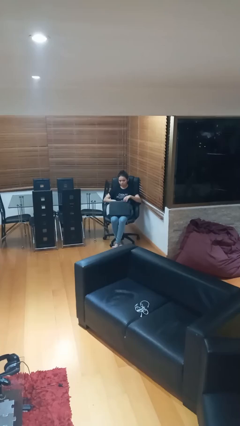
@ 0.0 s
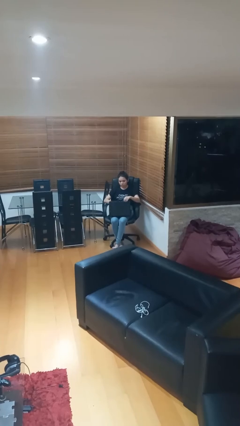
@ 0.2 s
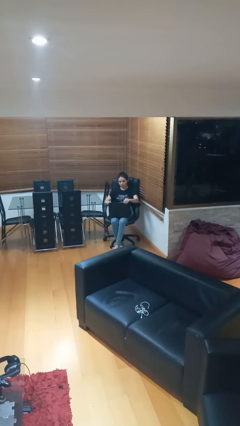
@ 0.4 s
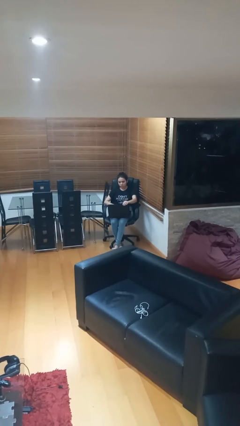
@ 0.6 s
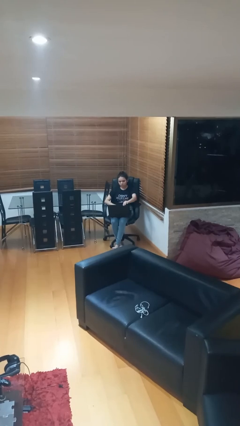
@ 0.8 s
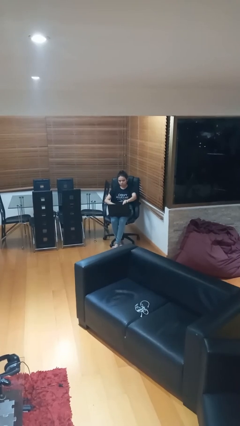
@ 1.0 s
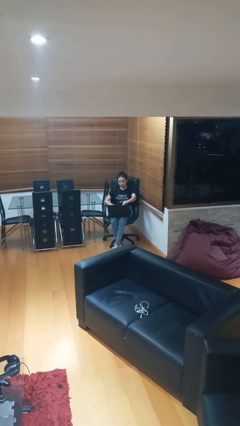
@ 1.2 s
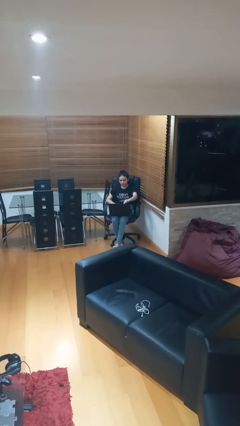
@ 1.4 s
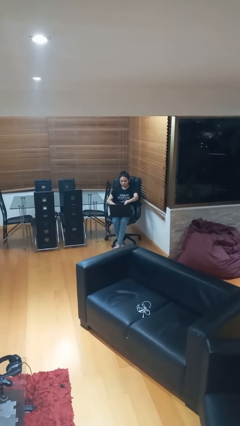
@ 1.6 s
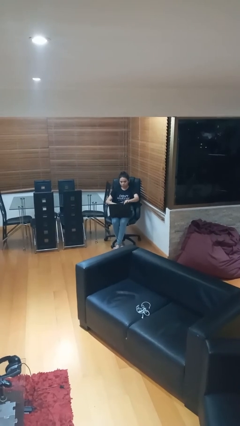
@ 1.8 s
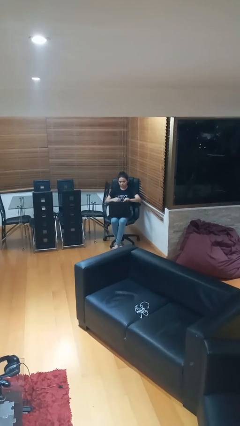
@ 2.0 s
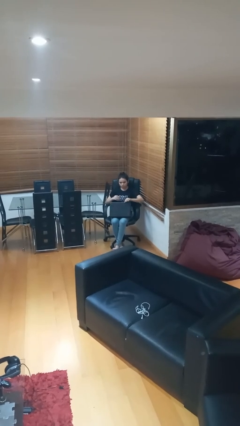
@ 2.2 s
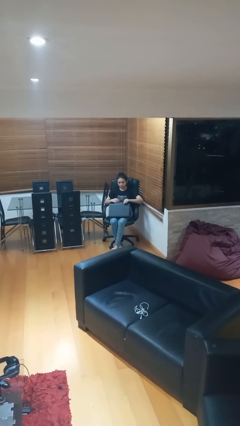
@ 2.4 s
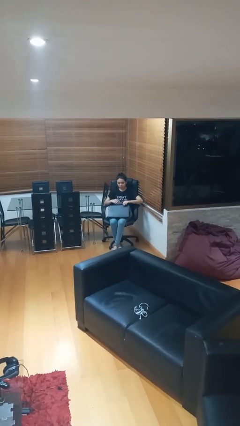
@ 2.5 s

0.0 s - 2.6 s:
person interacts with laptop

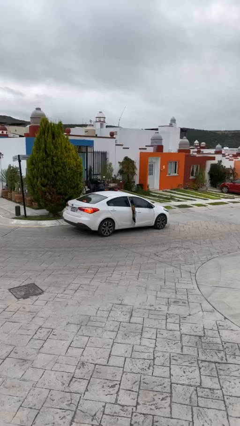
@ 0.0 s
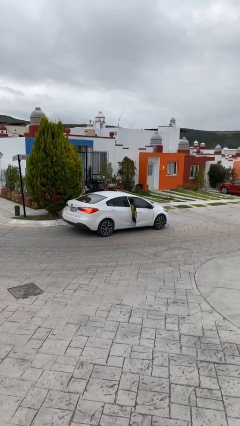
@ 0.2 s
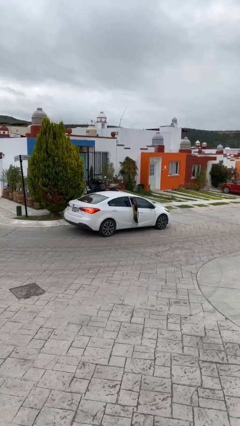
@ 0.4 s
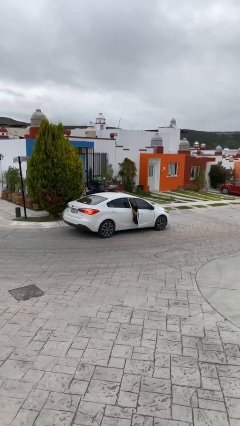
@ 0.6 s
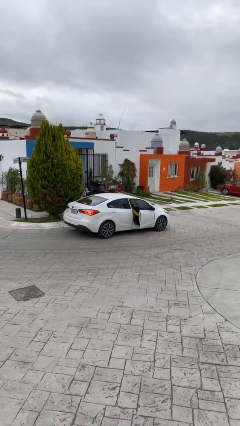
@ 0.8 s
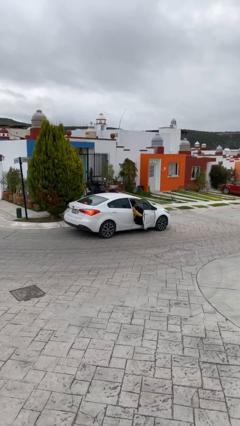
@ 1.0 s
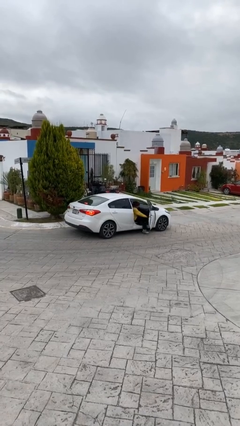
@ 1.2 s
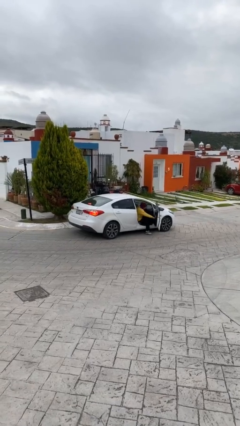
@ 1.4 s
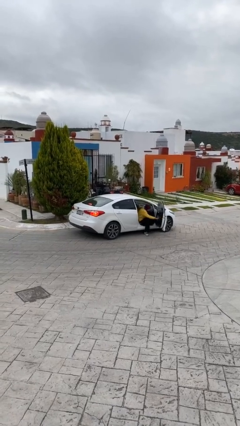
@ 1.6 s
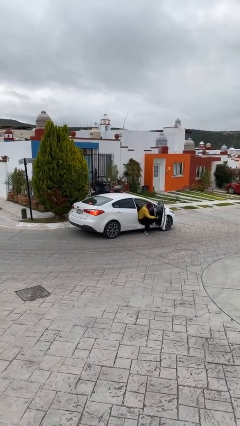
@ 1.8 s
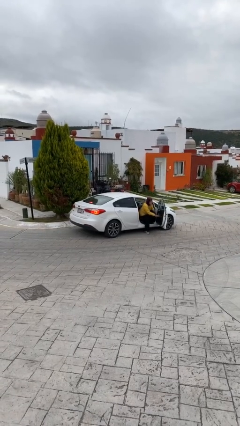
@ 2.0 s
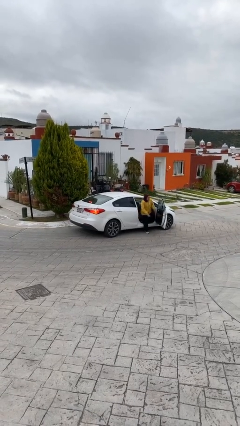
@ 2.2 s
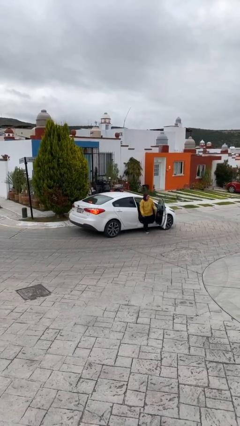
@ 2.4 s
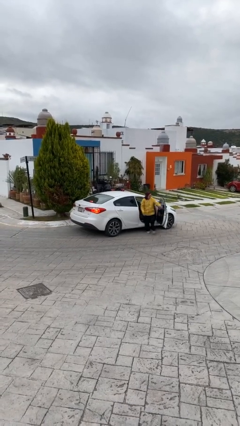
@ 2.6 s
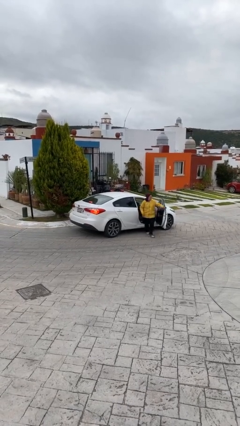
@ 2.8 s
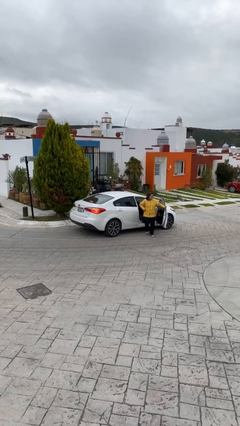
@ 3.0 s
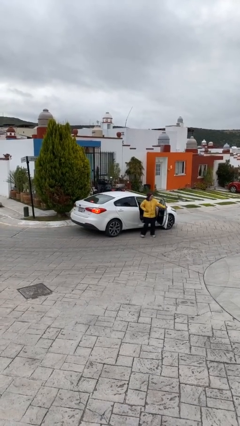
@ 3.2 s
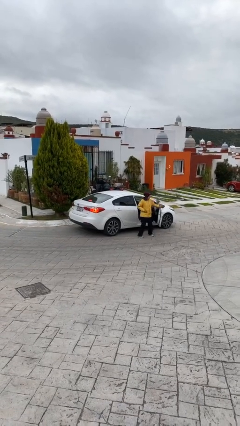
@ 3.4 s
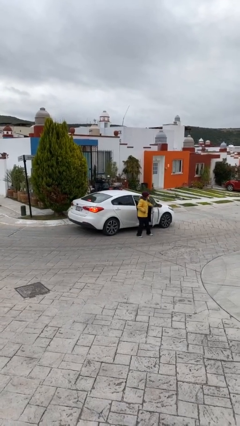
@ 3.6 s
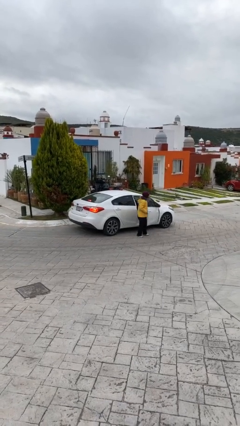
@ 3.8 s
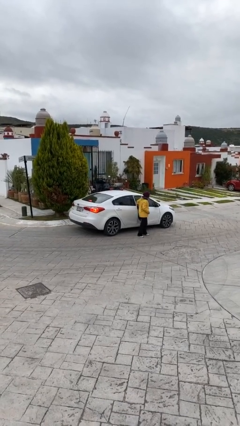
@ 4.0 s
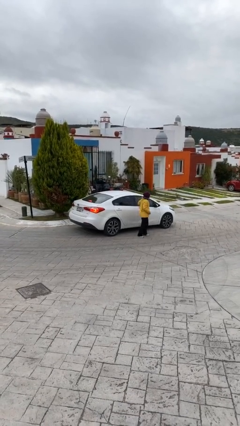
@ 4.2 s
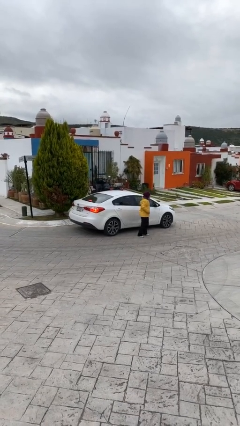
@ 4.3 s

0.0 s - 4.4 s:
car drops off person

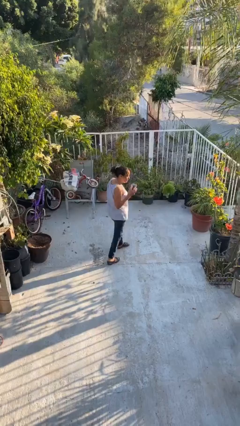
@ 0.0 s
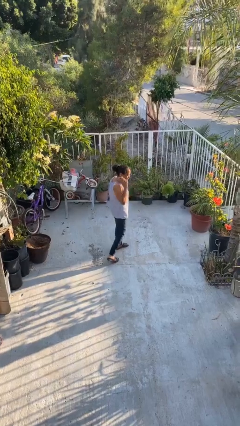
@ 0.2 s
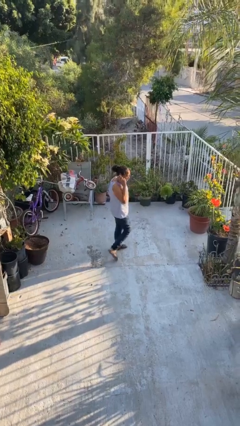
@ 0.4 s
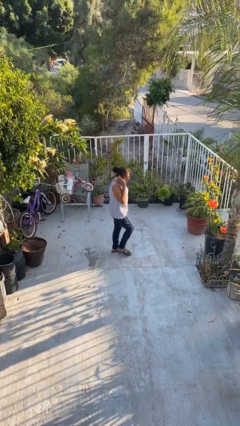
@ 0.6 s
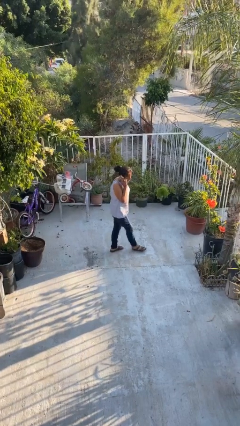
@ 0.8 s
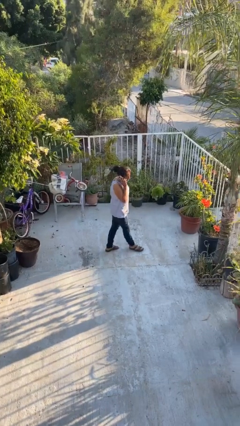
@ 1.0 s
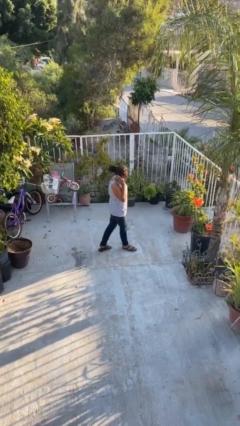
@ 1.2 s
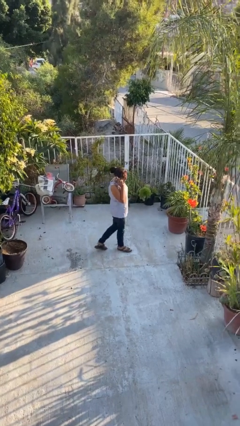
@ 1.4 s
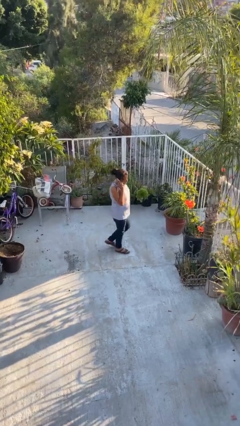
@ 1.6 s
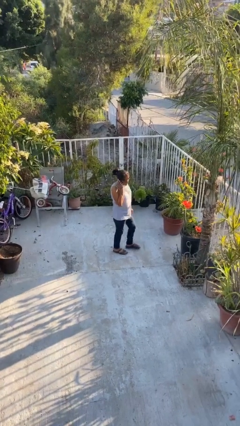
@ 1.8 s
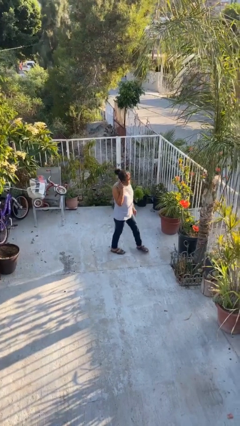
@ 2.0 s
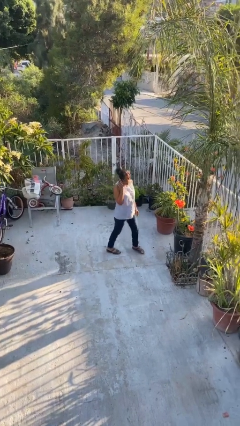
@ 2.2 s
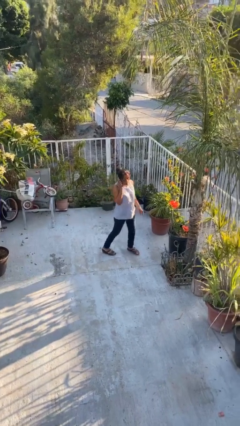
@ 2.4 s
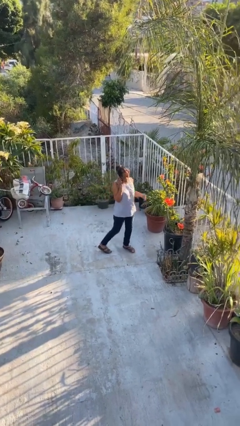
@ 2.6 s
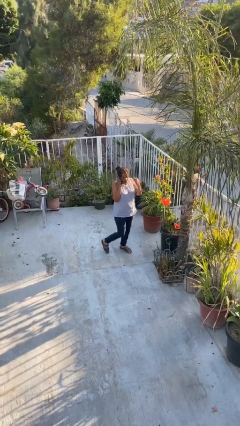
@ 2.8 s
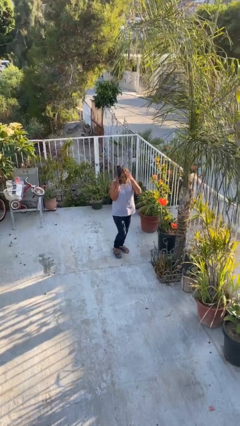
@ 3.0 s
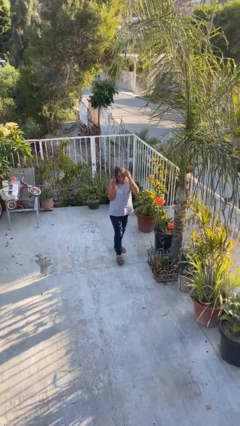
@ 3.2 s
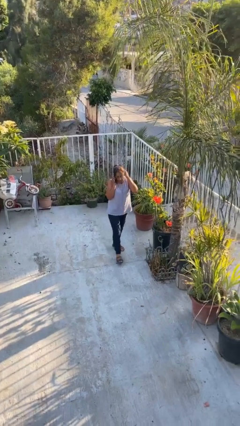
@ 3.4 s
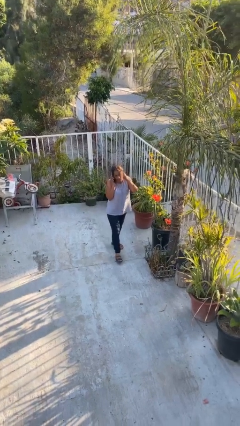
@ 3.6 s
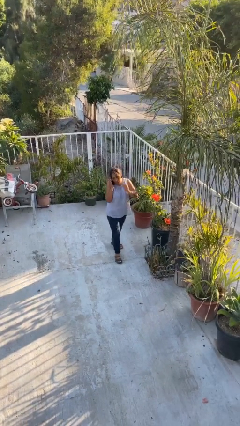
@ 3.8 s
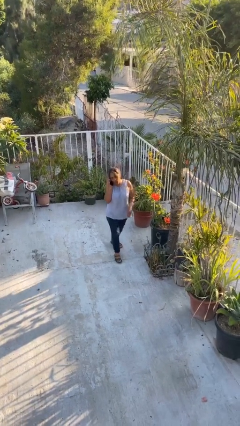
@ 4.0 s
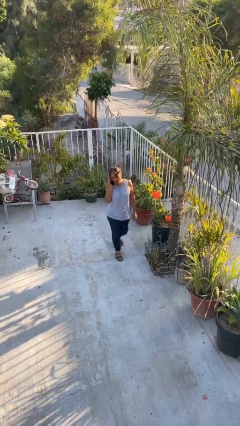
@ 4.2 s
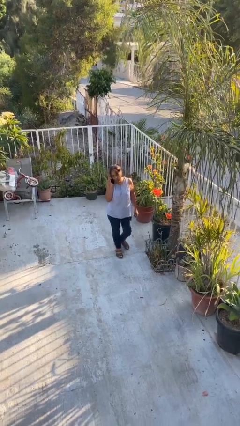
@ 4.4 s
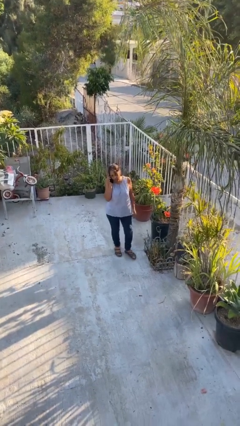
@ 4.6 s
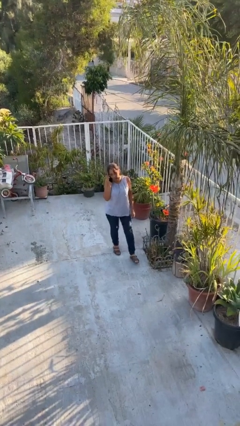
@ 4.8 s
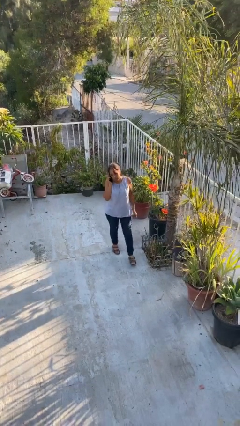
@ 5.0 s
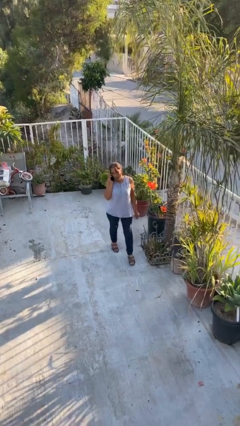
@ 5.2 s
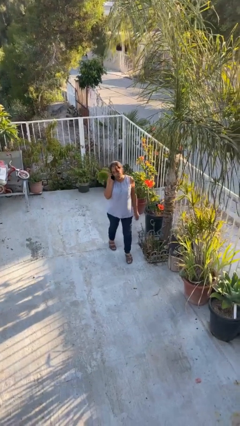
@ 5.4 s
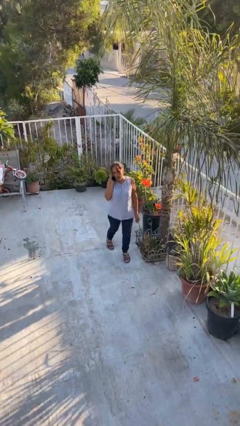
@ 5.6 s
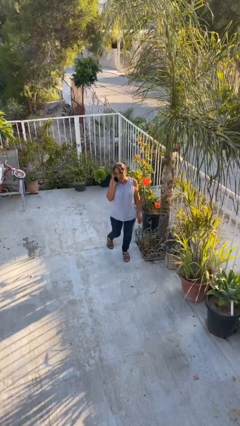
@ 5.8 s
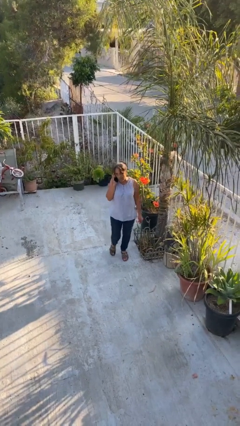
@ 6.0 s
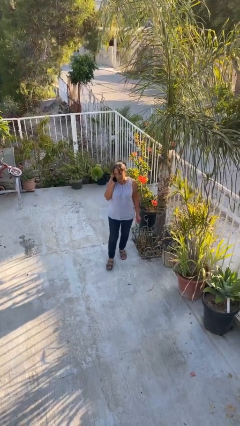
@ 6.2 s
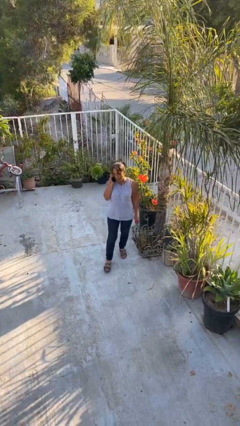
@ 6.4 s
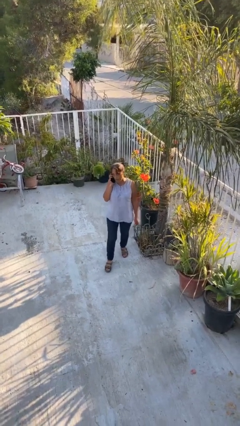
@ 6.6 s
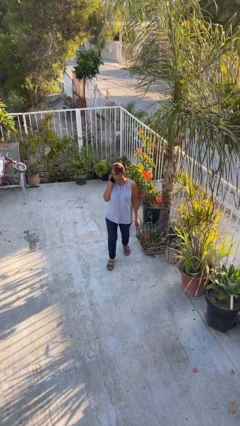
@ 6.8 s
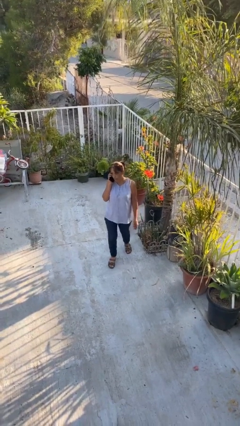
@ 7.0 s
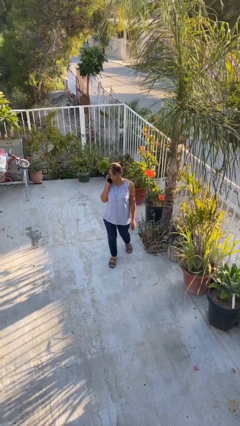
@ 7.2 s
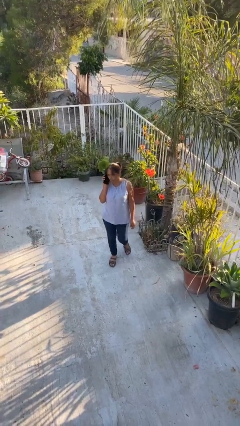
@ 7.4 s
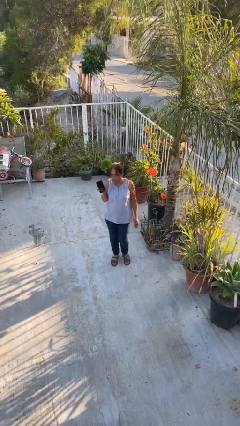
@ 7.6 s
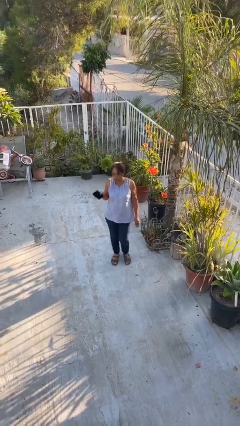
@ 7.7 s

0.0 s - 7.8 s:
person talks on phone

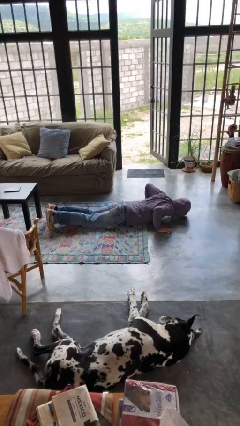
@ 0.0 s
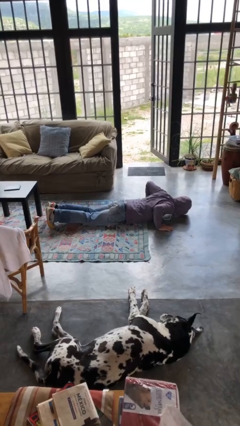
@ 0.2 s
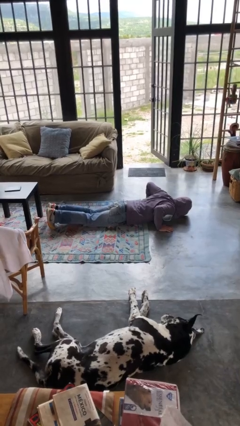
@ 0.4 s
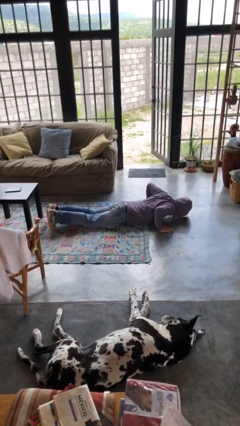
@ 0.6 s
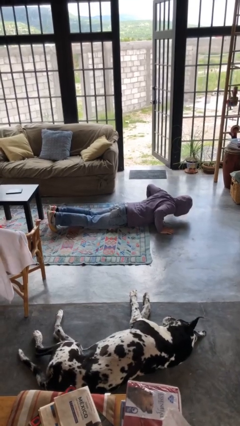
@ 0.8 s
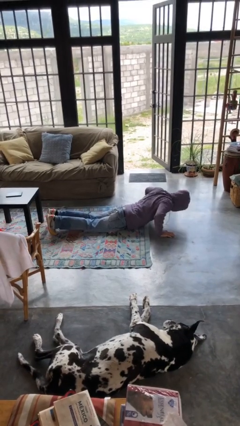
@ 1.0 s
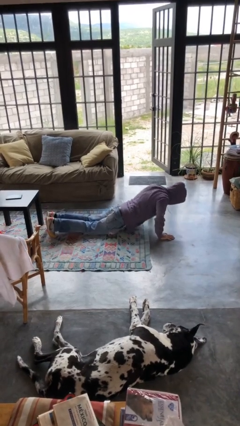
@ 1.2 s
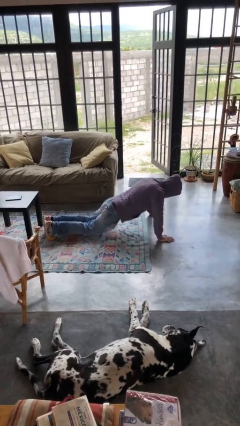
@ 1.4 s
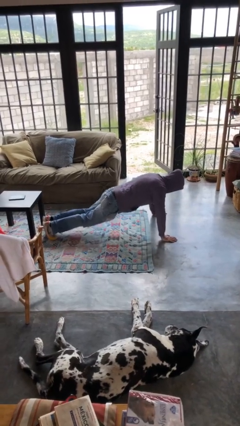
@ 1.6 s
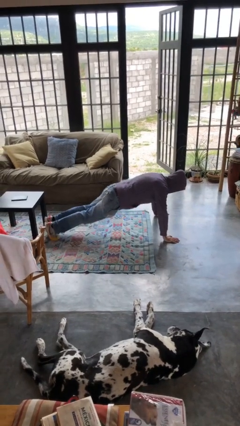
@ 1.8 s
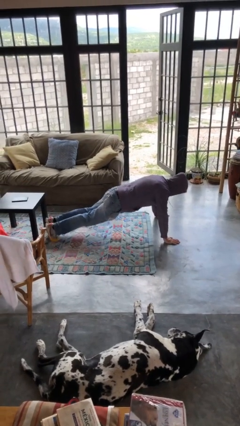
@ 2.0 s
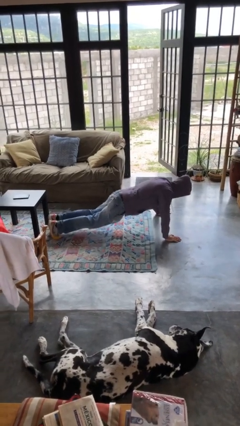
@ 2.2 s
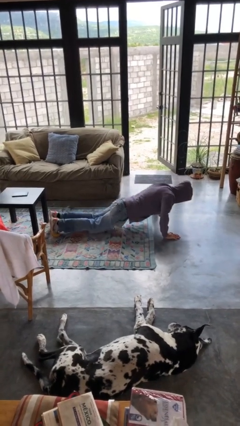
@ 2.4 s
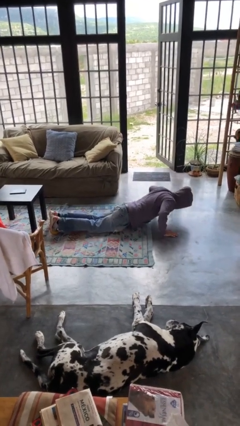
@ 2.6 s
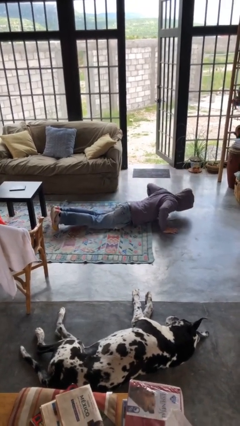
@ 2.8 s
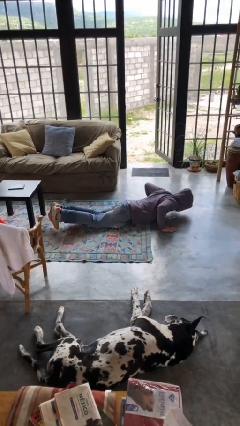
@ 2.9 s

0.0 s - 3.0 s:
person exercises with pushup
